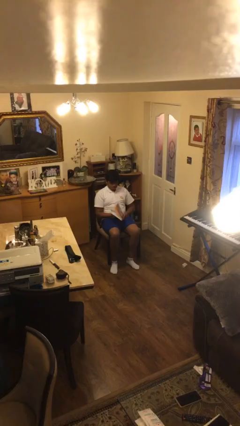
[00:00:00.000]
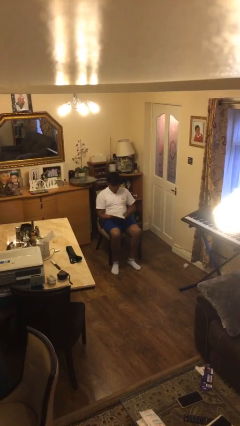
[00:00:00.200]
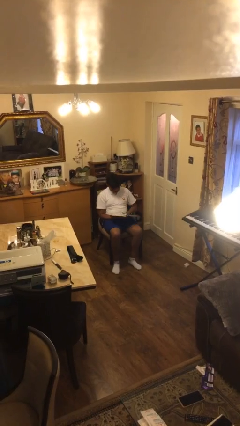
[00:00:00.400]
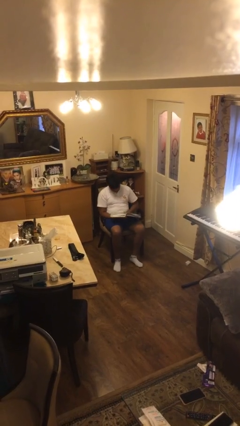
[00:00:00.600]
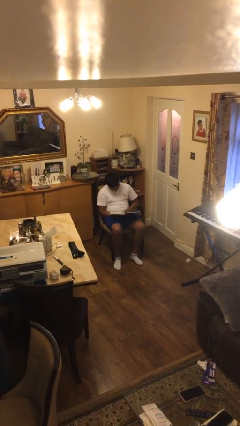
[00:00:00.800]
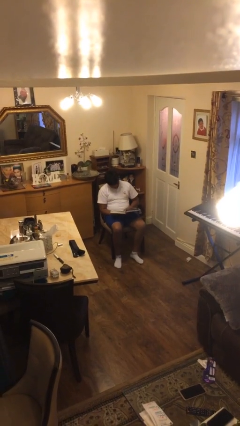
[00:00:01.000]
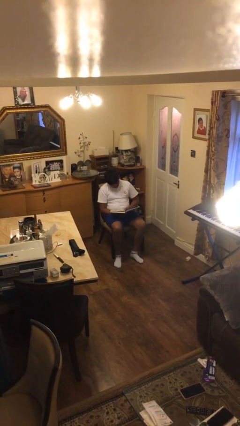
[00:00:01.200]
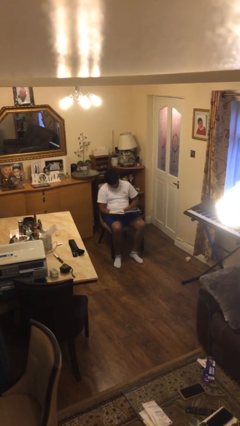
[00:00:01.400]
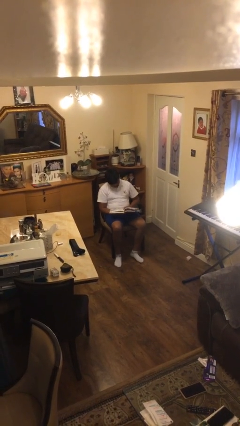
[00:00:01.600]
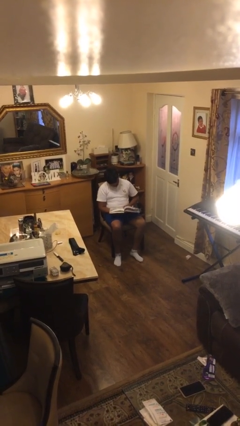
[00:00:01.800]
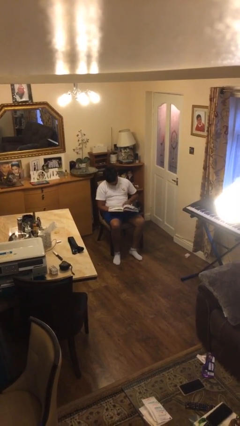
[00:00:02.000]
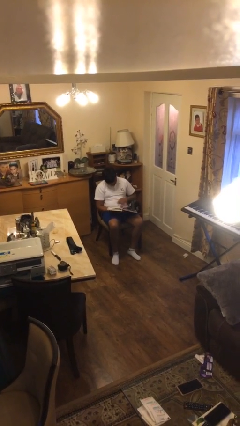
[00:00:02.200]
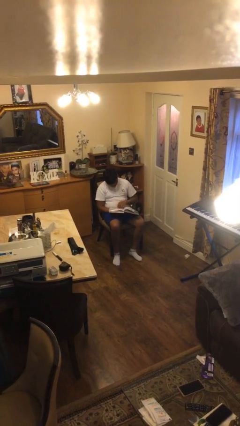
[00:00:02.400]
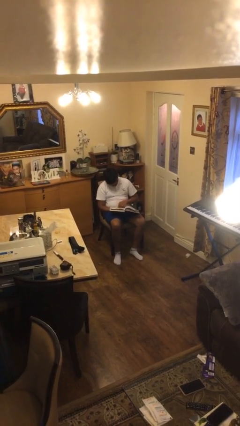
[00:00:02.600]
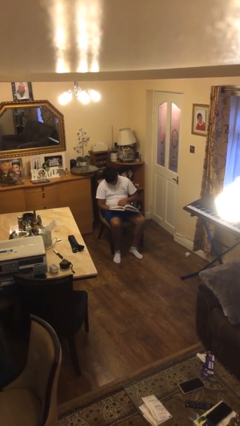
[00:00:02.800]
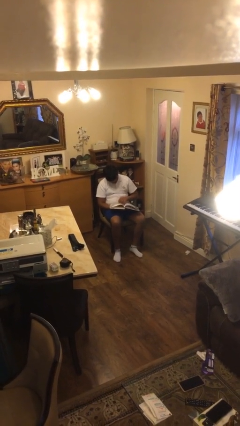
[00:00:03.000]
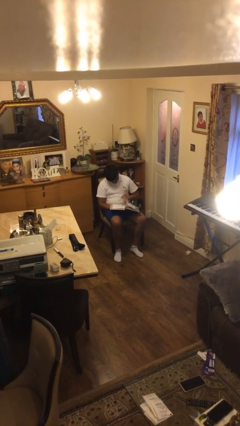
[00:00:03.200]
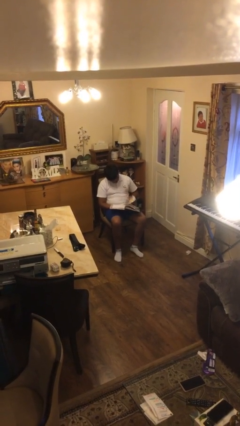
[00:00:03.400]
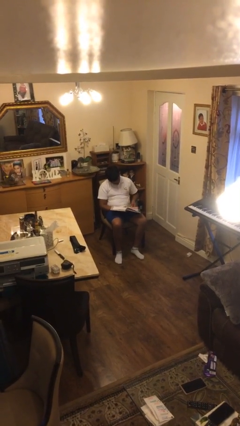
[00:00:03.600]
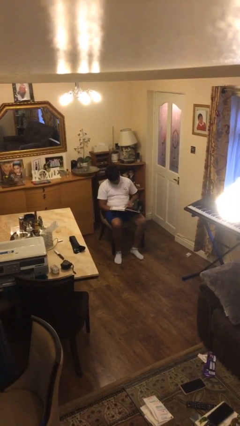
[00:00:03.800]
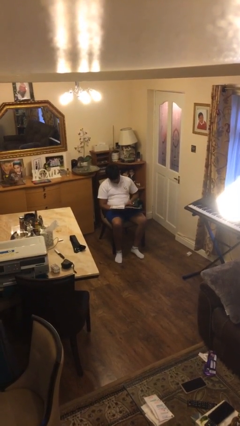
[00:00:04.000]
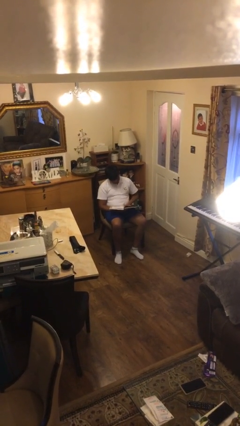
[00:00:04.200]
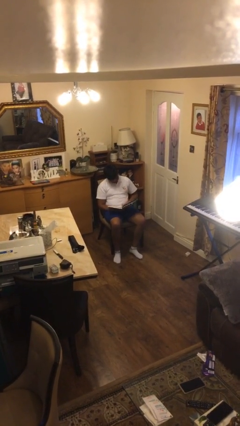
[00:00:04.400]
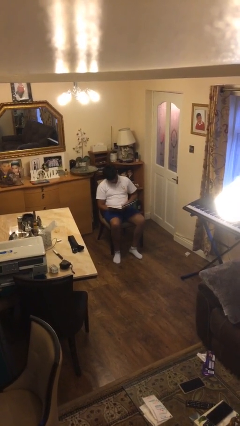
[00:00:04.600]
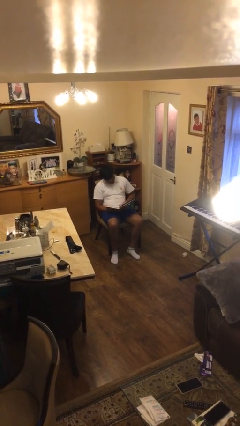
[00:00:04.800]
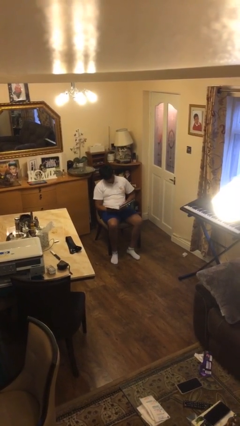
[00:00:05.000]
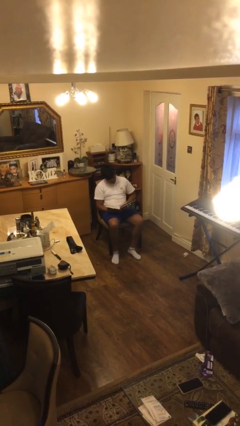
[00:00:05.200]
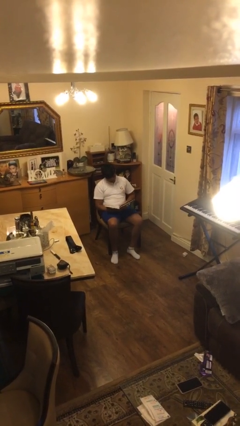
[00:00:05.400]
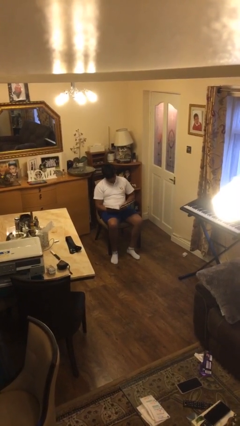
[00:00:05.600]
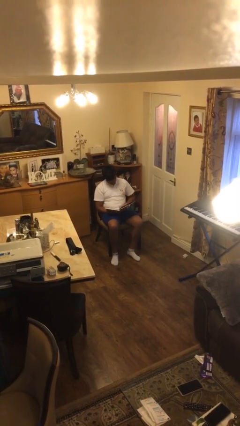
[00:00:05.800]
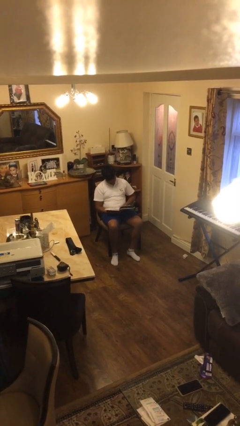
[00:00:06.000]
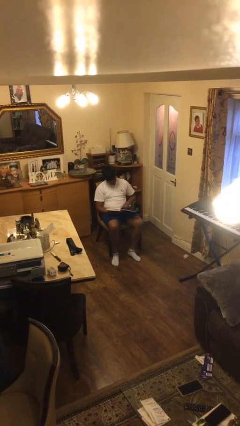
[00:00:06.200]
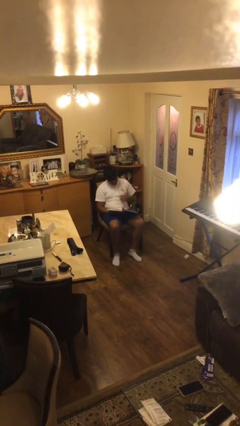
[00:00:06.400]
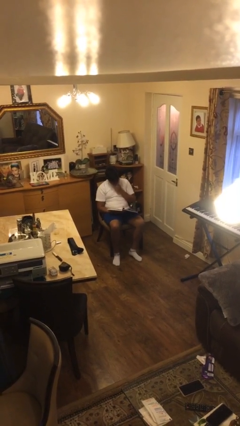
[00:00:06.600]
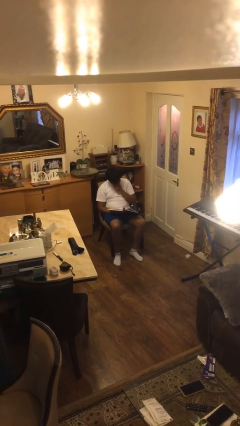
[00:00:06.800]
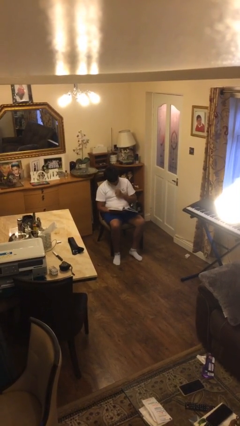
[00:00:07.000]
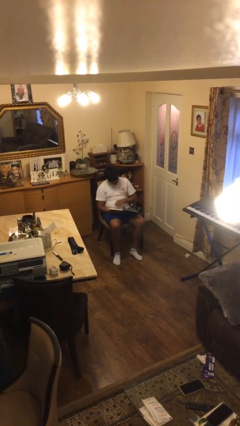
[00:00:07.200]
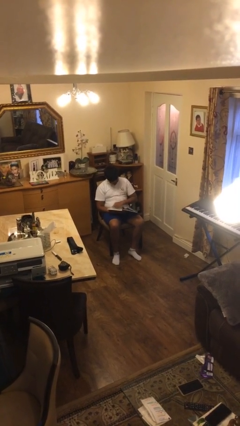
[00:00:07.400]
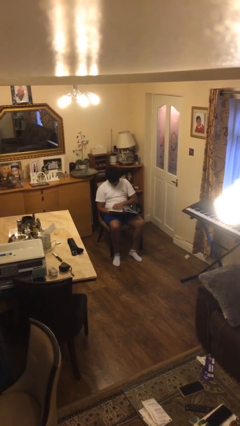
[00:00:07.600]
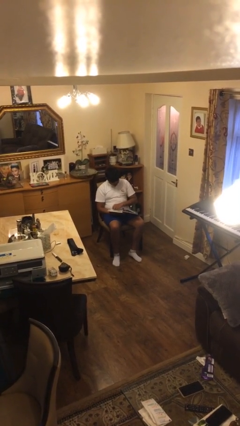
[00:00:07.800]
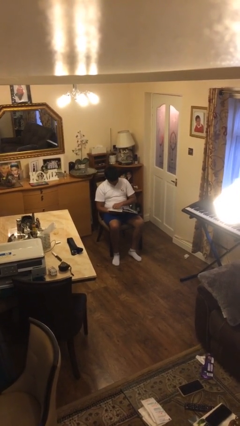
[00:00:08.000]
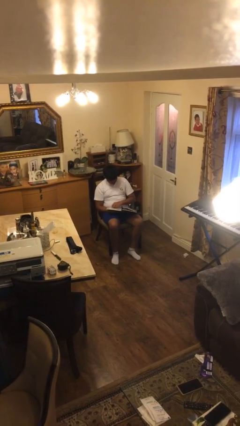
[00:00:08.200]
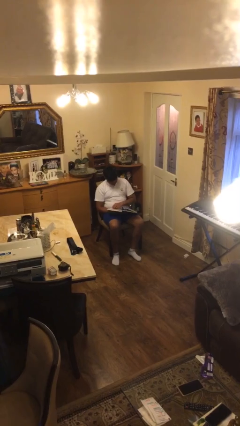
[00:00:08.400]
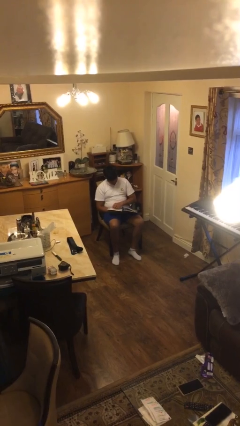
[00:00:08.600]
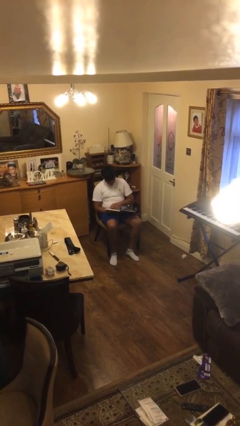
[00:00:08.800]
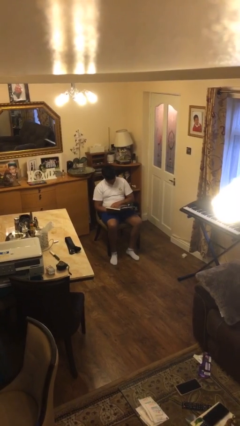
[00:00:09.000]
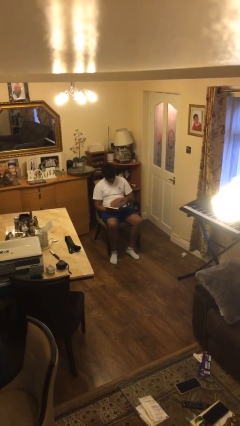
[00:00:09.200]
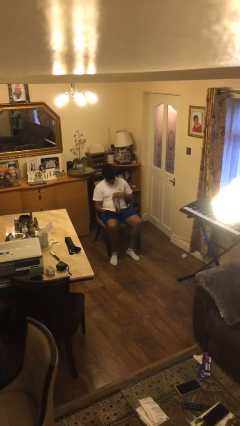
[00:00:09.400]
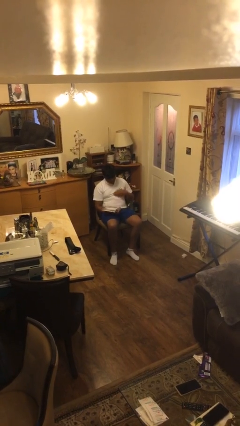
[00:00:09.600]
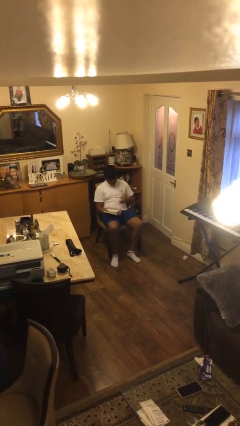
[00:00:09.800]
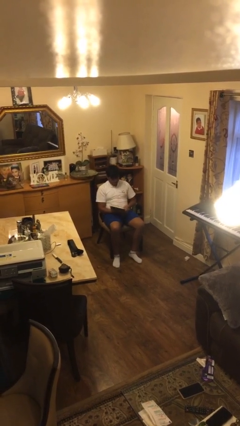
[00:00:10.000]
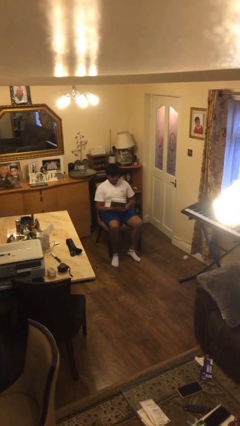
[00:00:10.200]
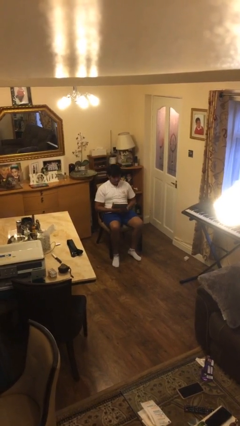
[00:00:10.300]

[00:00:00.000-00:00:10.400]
person reads document

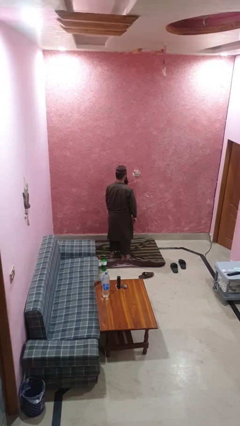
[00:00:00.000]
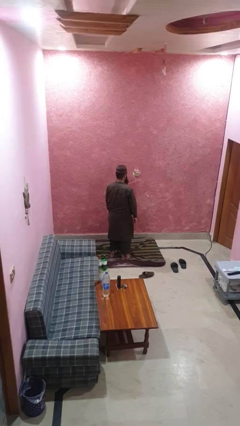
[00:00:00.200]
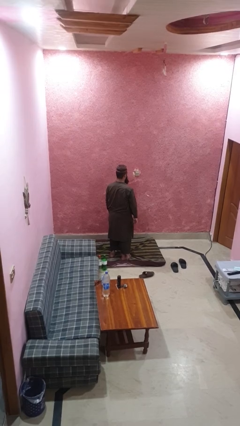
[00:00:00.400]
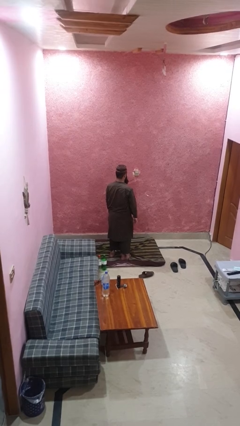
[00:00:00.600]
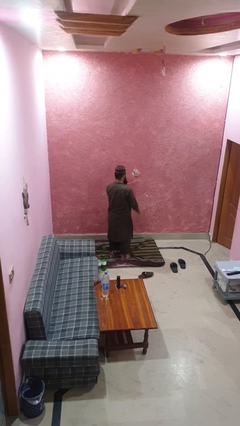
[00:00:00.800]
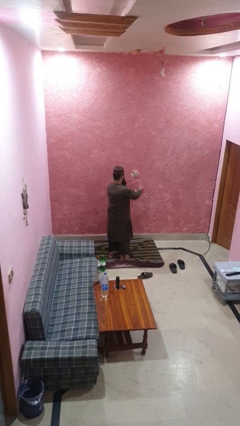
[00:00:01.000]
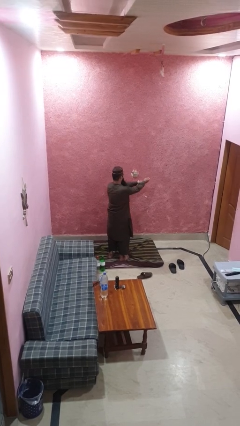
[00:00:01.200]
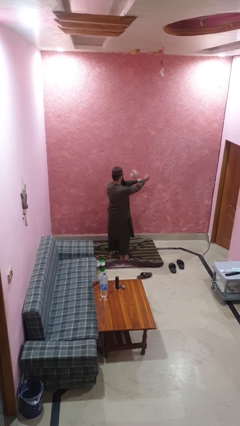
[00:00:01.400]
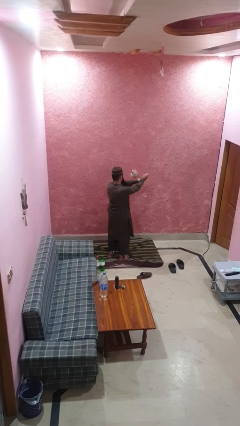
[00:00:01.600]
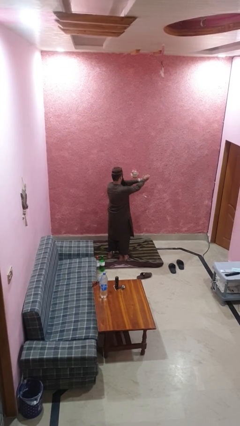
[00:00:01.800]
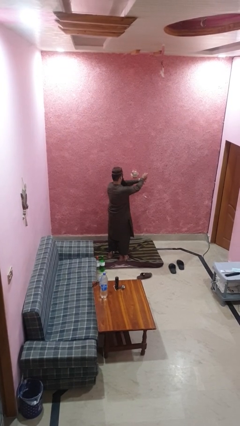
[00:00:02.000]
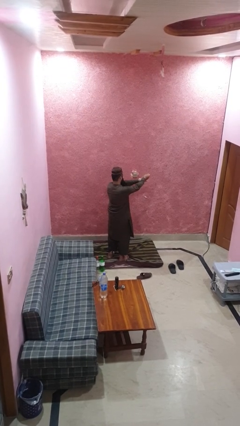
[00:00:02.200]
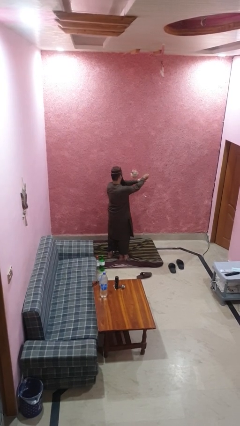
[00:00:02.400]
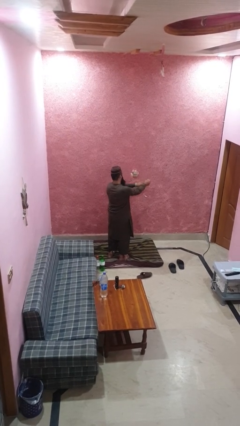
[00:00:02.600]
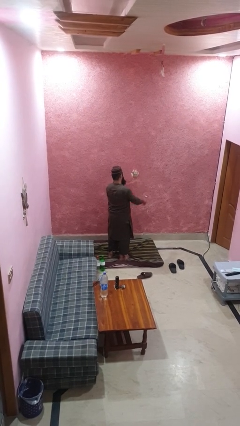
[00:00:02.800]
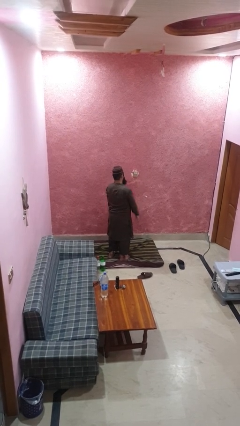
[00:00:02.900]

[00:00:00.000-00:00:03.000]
person snaps fingers

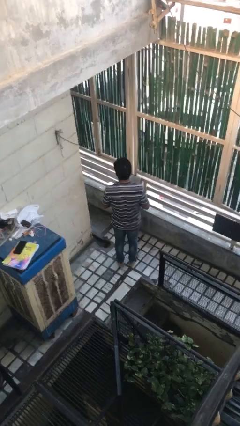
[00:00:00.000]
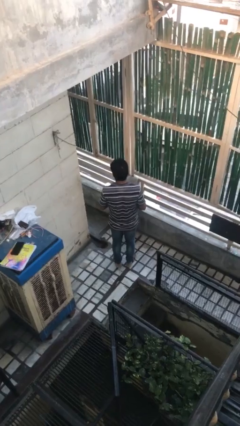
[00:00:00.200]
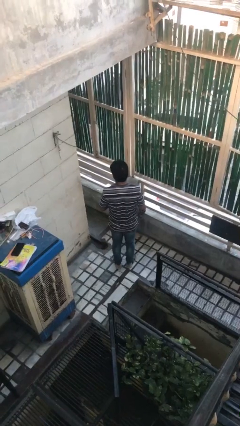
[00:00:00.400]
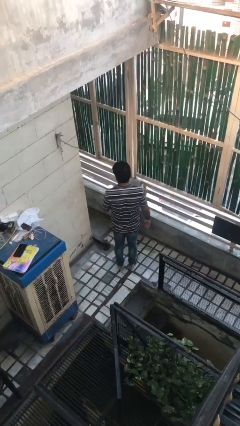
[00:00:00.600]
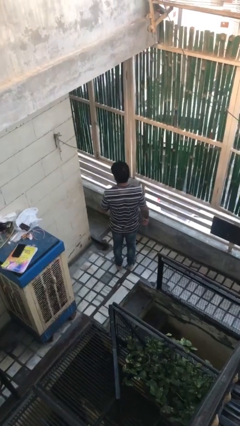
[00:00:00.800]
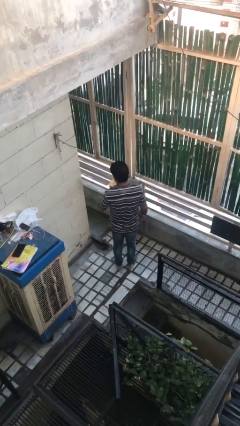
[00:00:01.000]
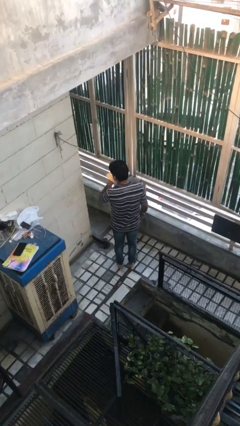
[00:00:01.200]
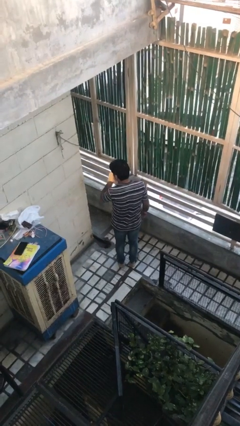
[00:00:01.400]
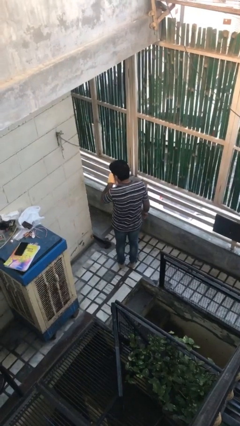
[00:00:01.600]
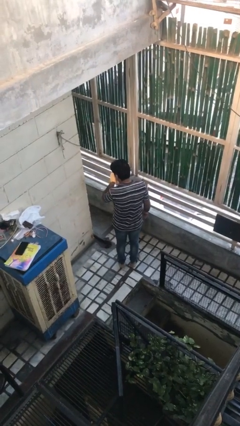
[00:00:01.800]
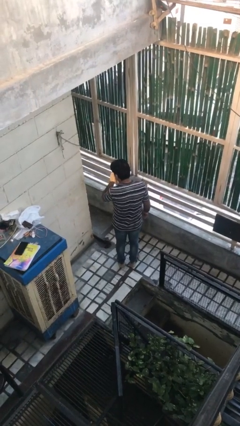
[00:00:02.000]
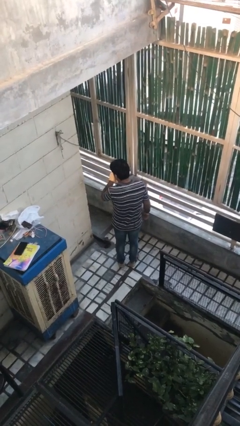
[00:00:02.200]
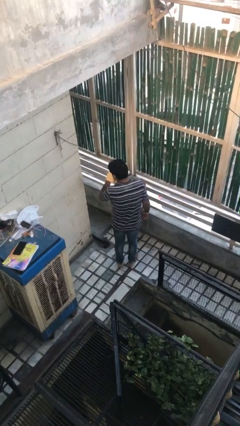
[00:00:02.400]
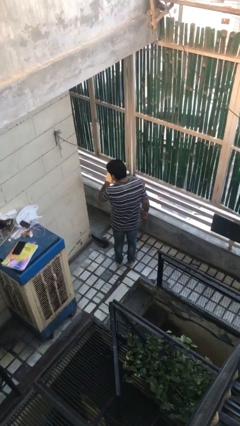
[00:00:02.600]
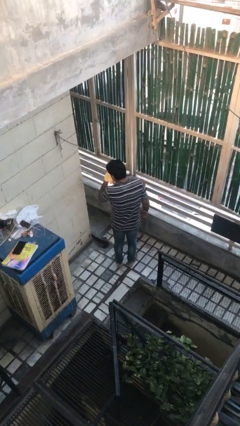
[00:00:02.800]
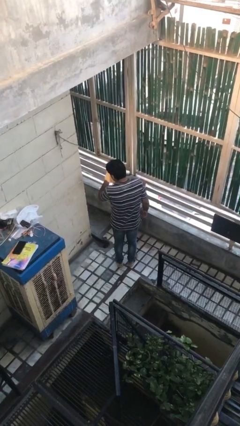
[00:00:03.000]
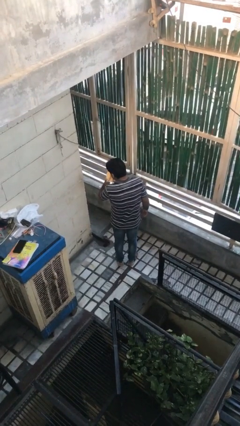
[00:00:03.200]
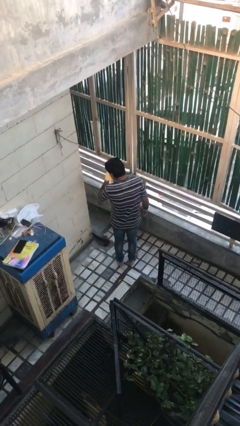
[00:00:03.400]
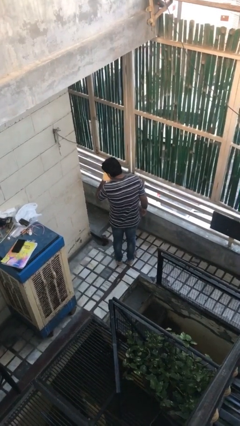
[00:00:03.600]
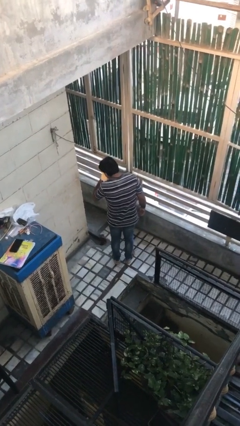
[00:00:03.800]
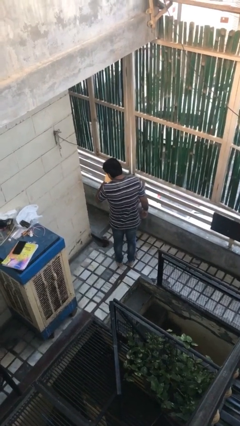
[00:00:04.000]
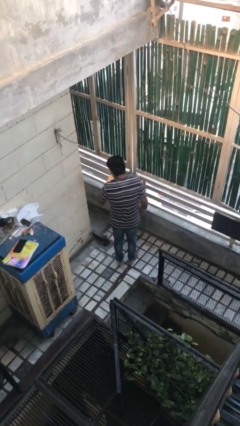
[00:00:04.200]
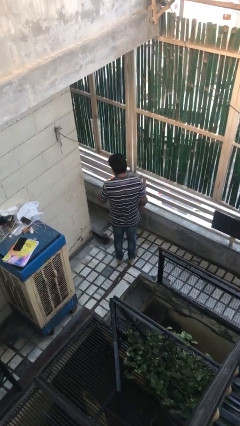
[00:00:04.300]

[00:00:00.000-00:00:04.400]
person blows nose
